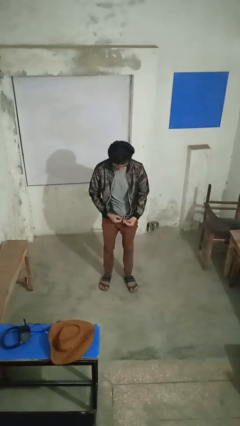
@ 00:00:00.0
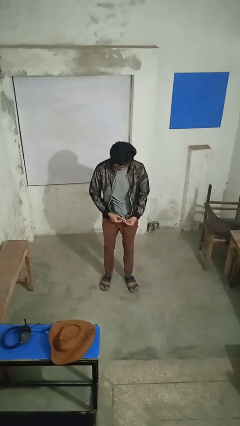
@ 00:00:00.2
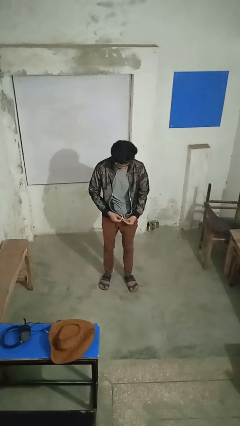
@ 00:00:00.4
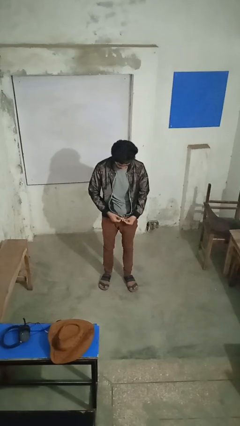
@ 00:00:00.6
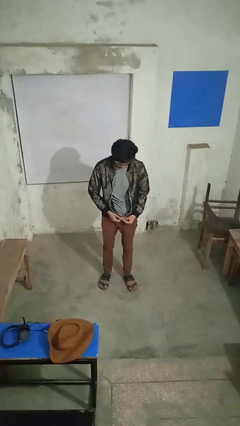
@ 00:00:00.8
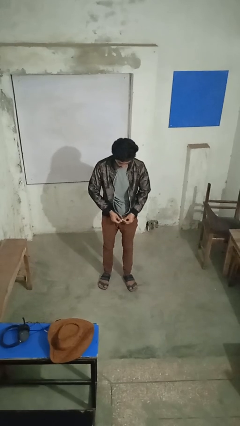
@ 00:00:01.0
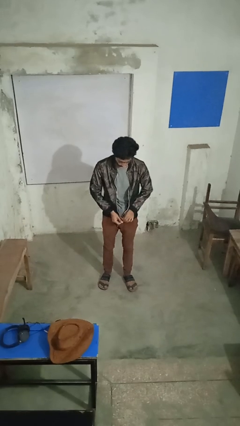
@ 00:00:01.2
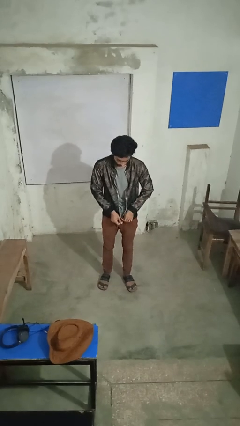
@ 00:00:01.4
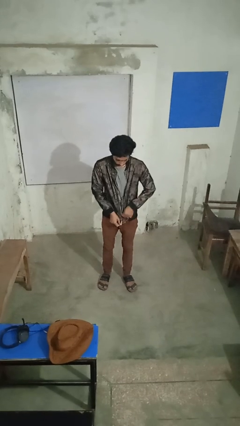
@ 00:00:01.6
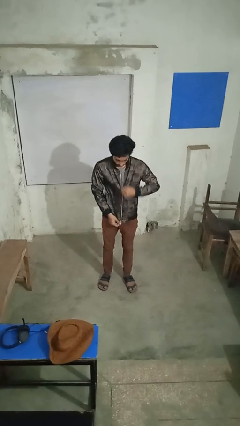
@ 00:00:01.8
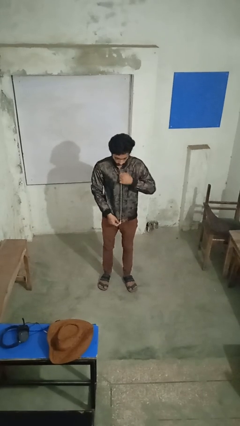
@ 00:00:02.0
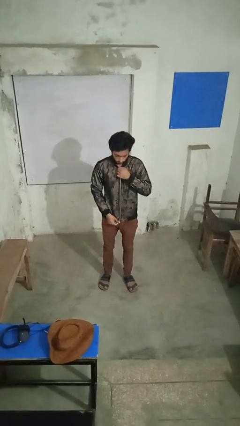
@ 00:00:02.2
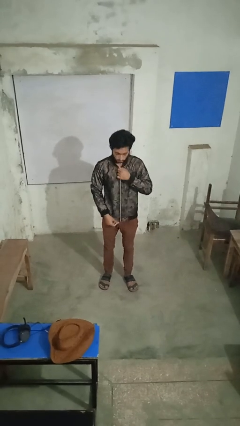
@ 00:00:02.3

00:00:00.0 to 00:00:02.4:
person zips up jacket

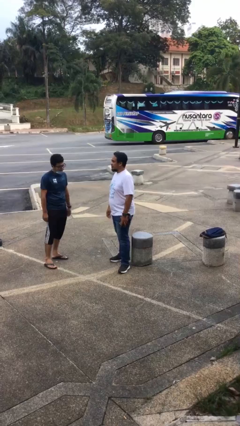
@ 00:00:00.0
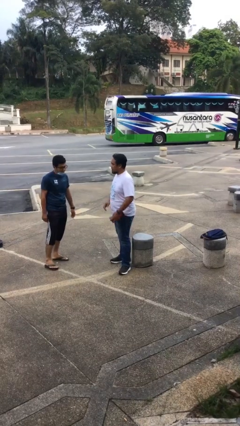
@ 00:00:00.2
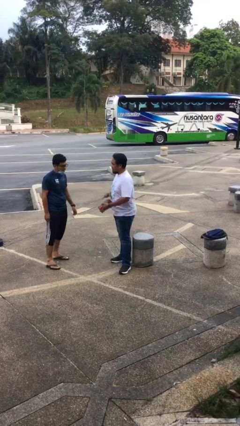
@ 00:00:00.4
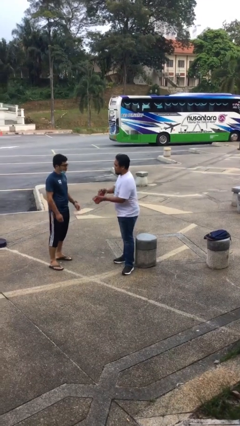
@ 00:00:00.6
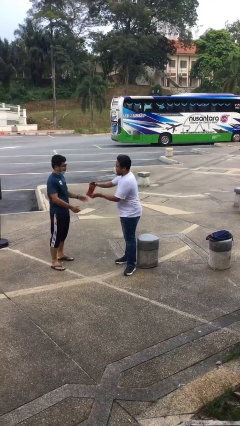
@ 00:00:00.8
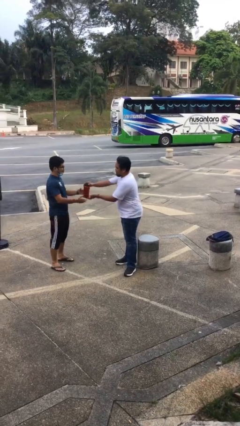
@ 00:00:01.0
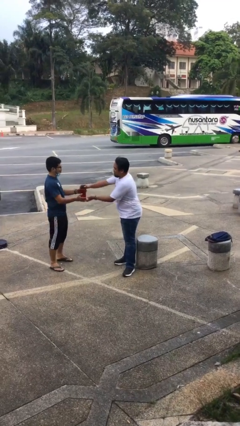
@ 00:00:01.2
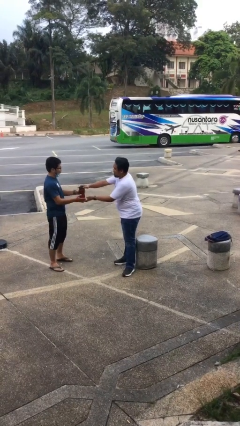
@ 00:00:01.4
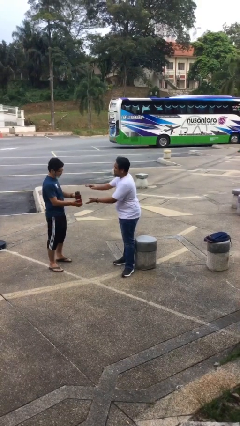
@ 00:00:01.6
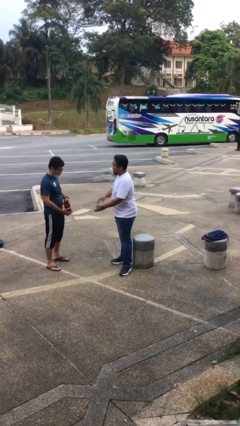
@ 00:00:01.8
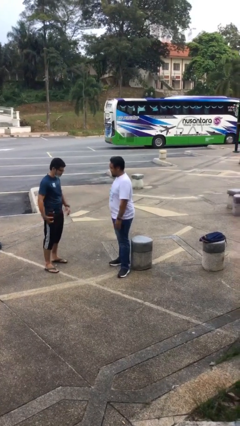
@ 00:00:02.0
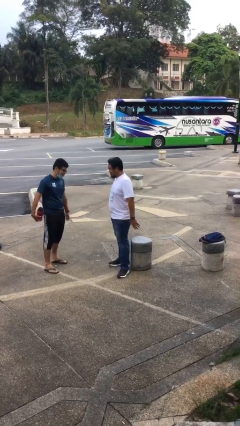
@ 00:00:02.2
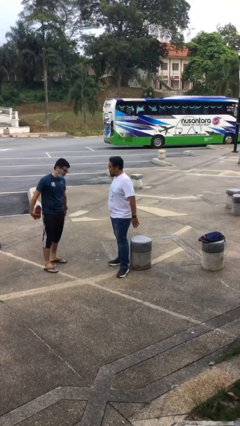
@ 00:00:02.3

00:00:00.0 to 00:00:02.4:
person transfers object to person

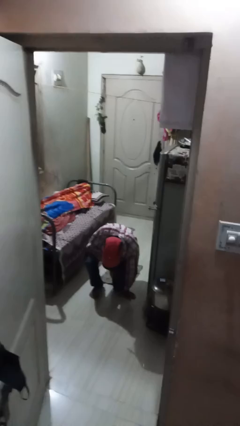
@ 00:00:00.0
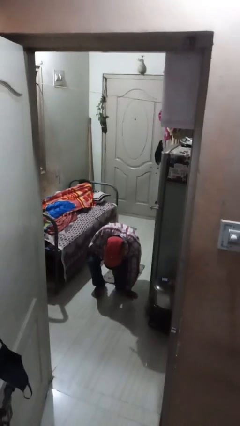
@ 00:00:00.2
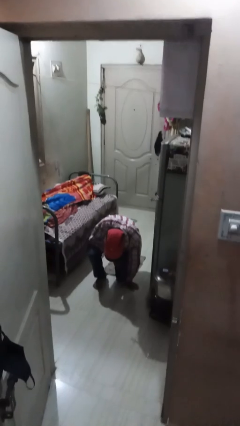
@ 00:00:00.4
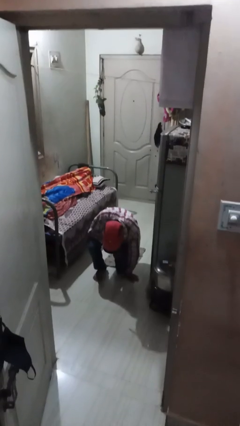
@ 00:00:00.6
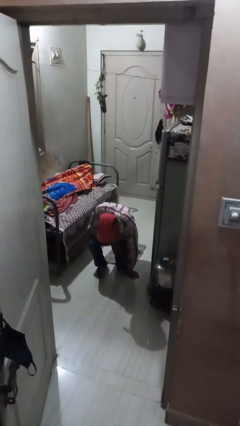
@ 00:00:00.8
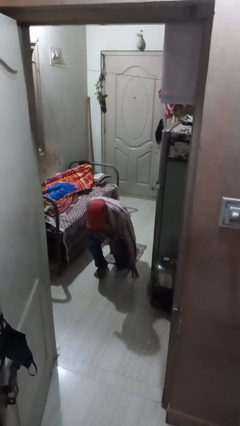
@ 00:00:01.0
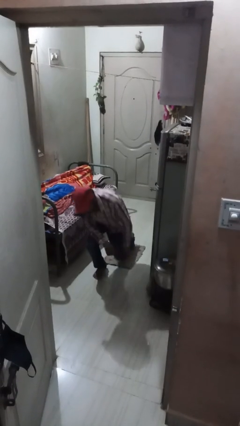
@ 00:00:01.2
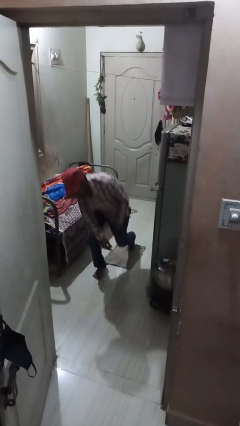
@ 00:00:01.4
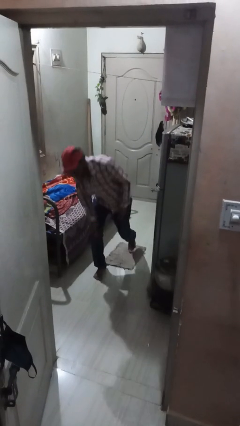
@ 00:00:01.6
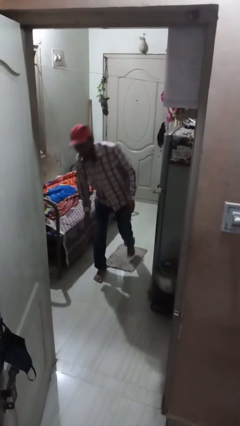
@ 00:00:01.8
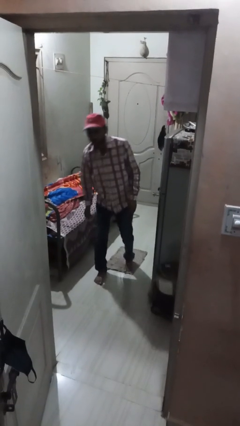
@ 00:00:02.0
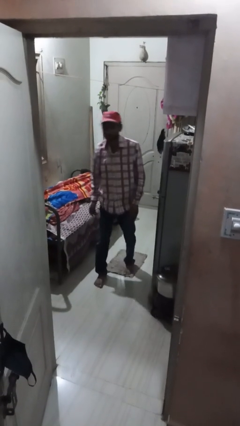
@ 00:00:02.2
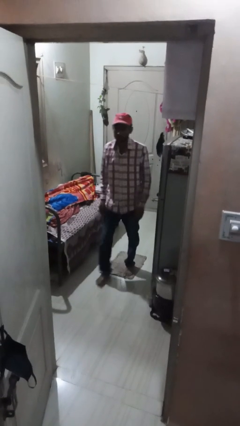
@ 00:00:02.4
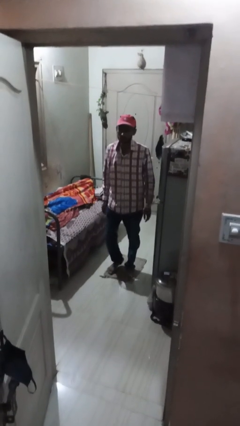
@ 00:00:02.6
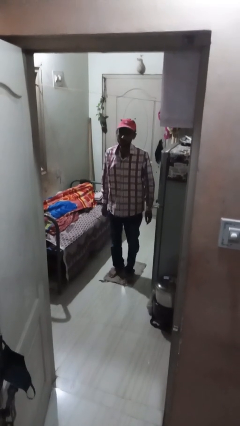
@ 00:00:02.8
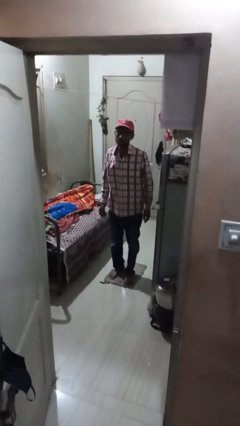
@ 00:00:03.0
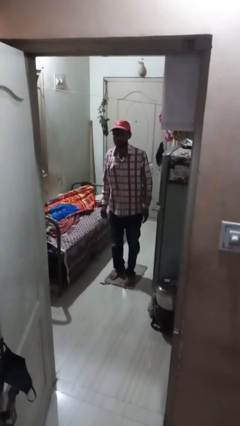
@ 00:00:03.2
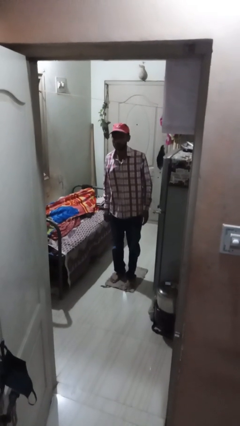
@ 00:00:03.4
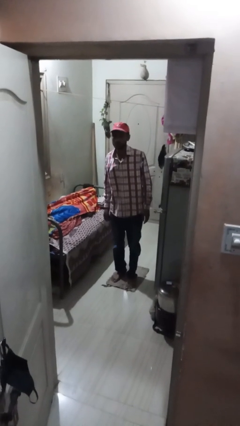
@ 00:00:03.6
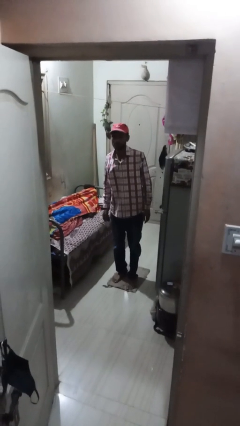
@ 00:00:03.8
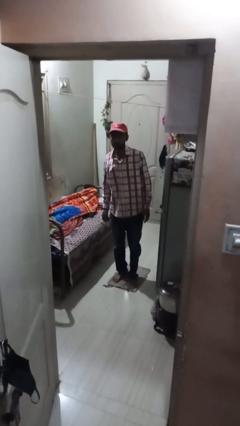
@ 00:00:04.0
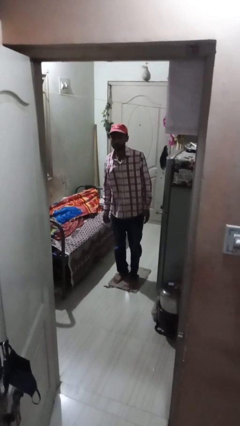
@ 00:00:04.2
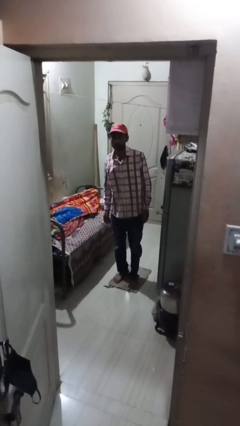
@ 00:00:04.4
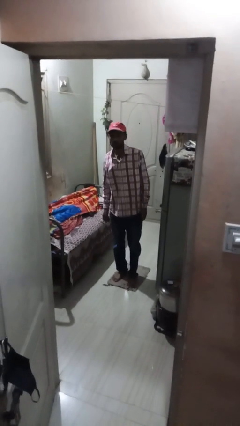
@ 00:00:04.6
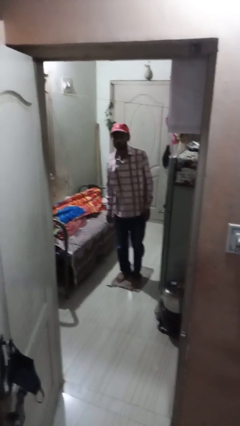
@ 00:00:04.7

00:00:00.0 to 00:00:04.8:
person stands up from floor

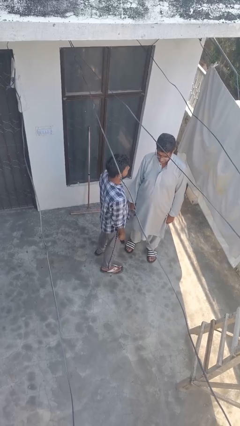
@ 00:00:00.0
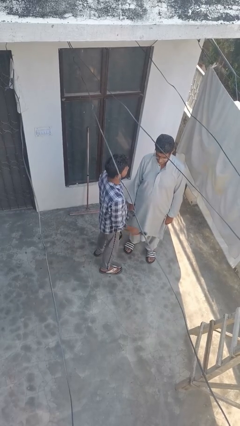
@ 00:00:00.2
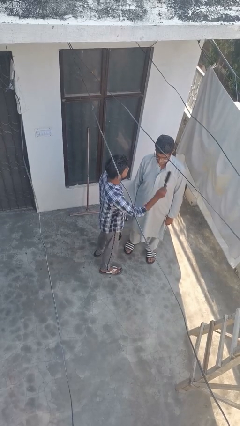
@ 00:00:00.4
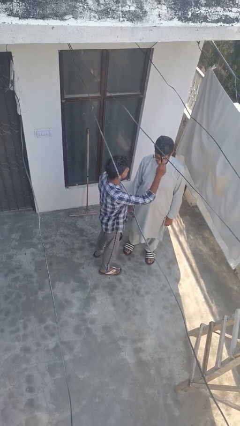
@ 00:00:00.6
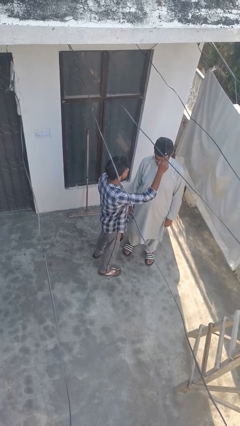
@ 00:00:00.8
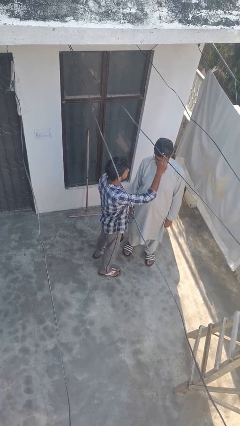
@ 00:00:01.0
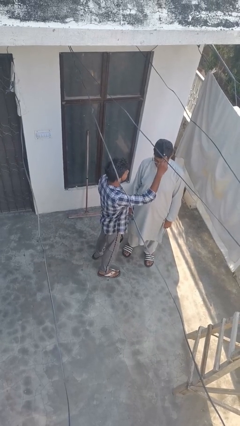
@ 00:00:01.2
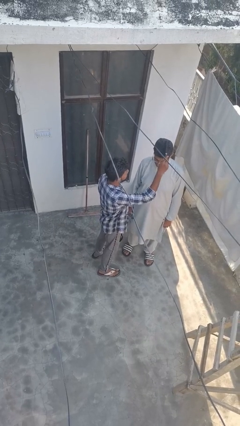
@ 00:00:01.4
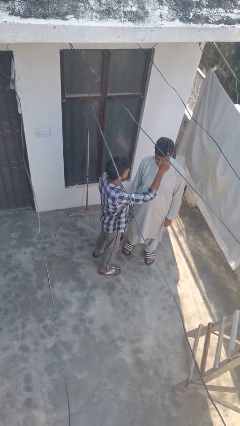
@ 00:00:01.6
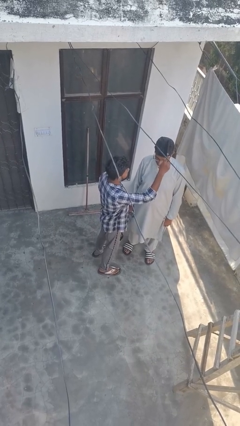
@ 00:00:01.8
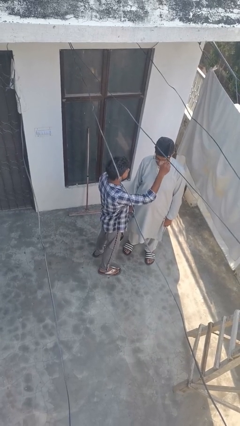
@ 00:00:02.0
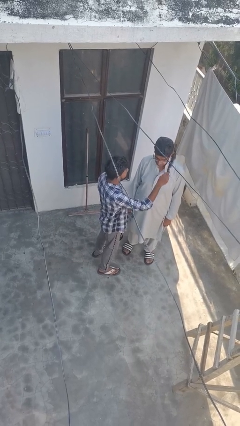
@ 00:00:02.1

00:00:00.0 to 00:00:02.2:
person brushes hair of person

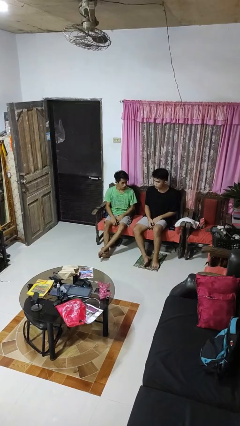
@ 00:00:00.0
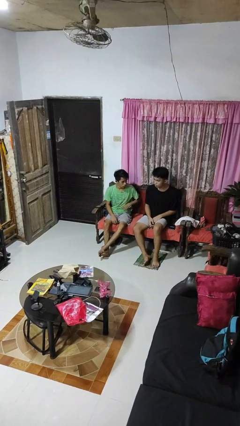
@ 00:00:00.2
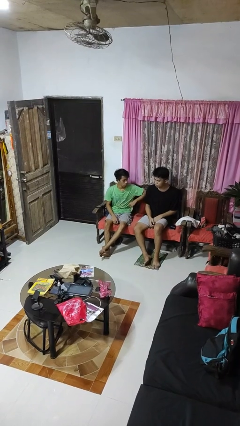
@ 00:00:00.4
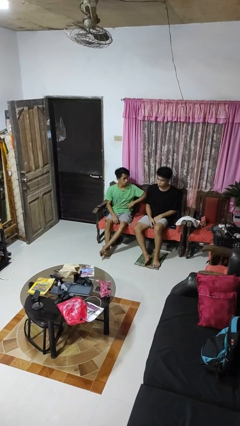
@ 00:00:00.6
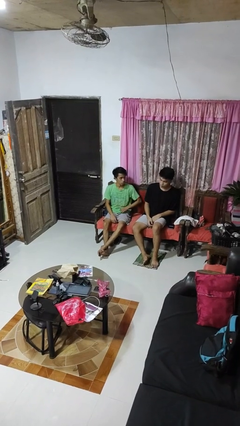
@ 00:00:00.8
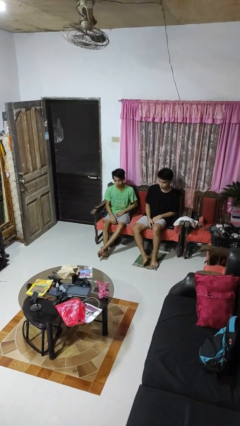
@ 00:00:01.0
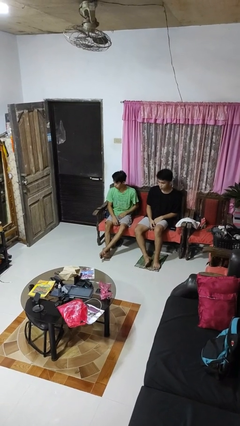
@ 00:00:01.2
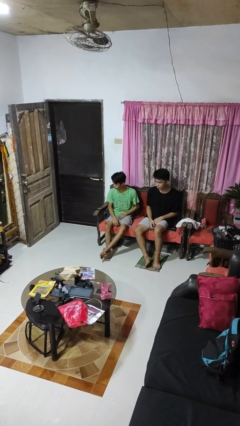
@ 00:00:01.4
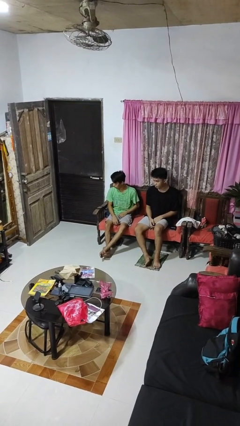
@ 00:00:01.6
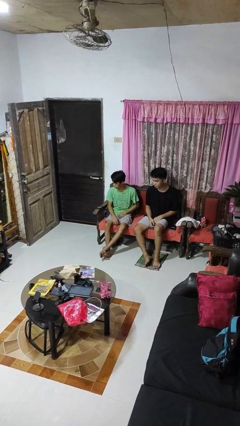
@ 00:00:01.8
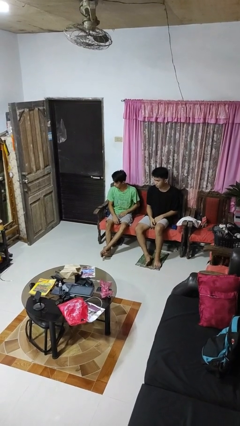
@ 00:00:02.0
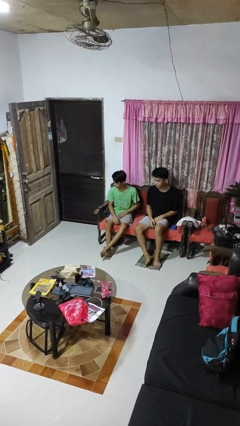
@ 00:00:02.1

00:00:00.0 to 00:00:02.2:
person nudges person with elbow

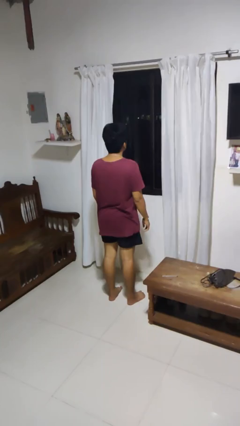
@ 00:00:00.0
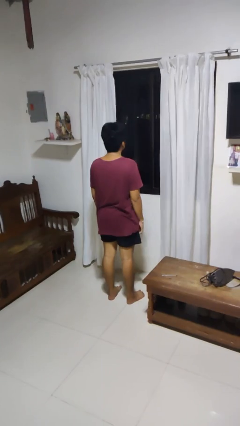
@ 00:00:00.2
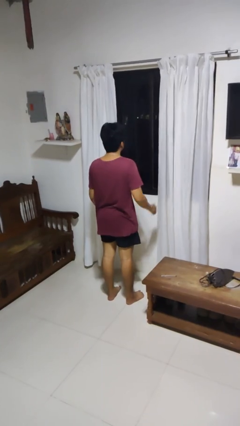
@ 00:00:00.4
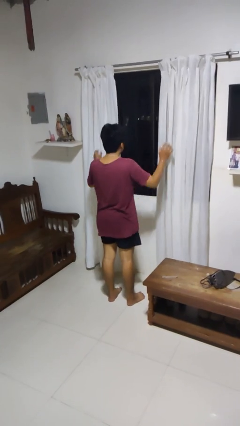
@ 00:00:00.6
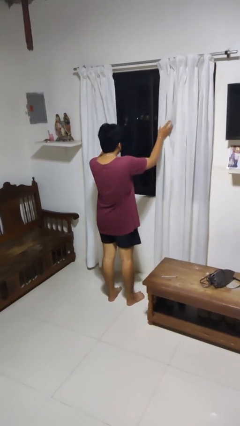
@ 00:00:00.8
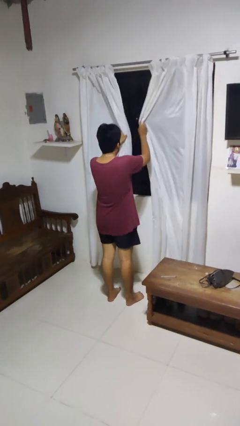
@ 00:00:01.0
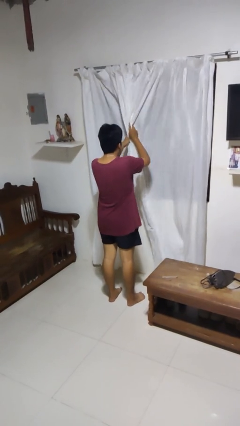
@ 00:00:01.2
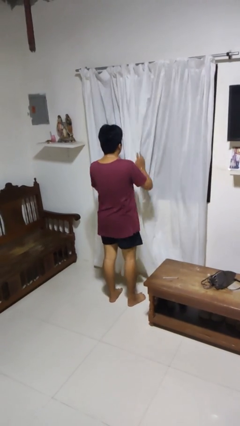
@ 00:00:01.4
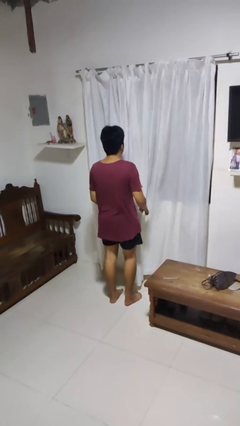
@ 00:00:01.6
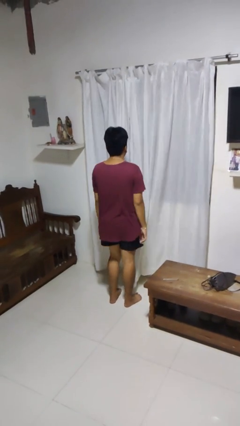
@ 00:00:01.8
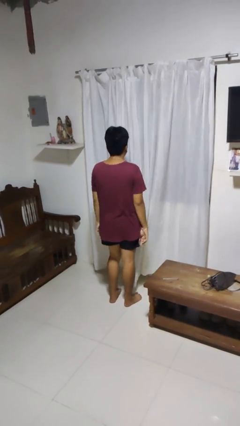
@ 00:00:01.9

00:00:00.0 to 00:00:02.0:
person closes curtains

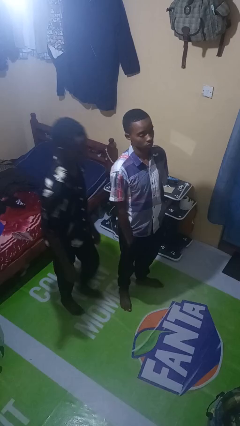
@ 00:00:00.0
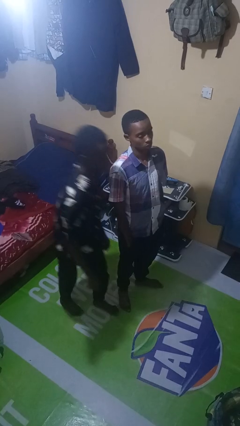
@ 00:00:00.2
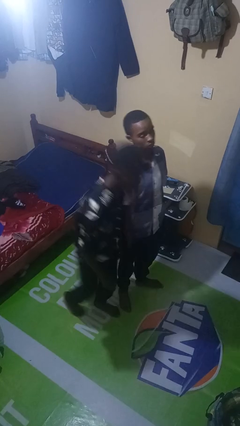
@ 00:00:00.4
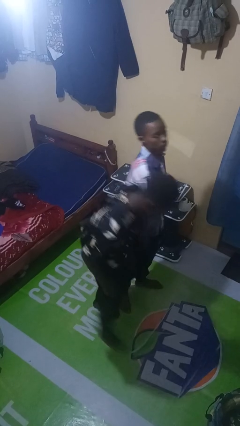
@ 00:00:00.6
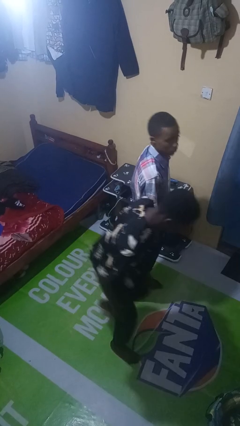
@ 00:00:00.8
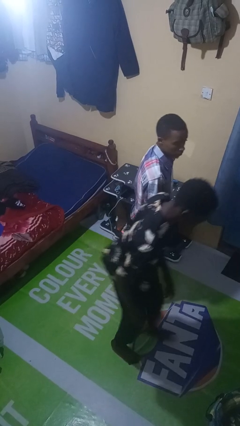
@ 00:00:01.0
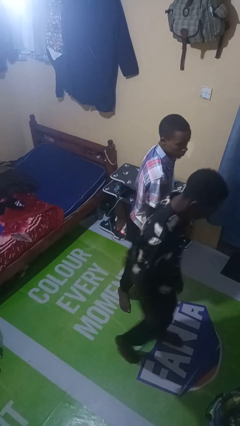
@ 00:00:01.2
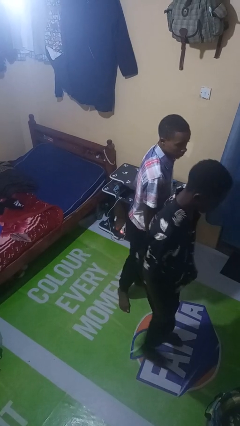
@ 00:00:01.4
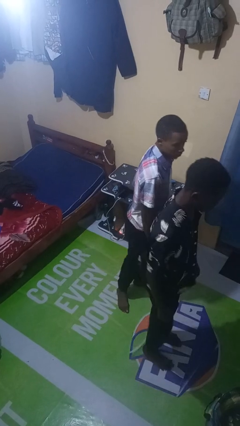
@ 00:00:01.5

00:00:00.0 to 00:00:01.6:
person bumps into person
